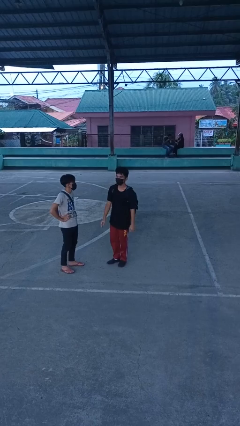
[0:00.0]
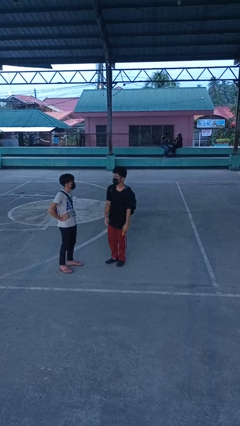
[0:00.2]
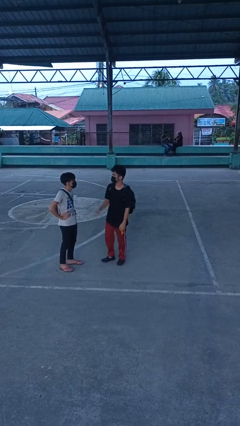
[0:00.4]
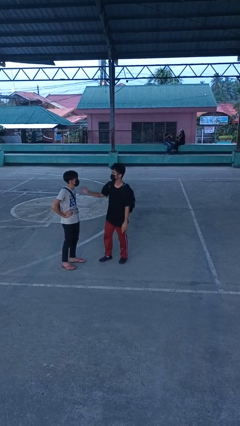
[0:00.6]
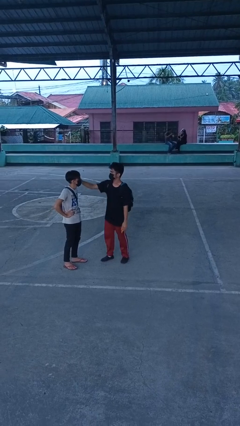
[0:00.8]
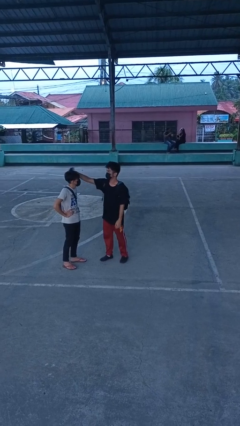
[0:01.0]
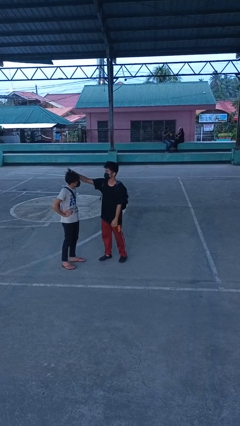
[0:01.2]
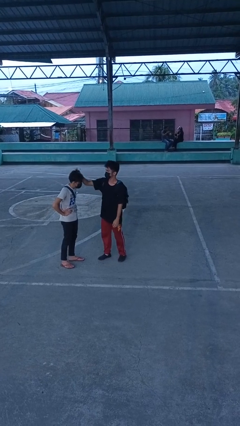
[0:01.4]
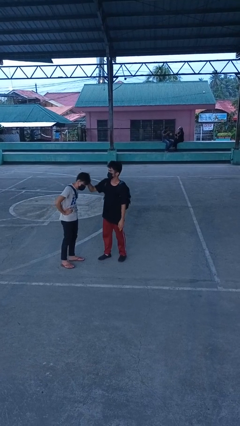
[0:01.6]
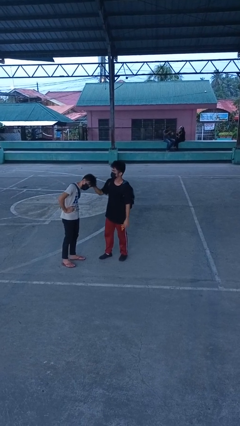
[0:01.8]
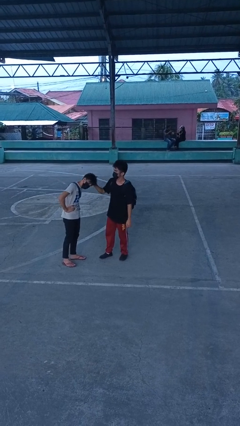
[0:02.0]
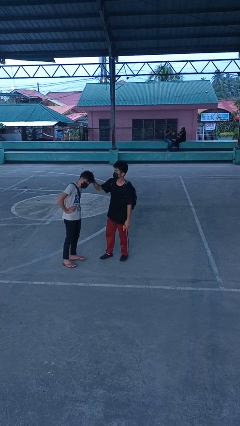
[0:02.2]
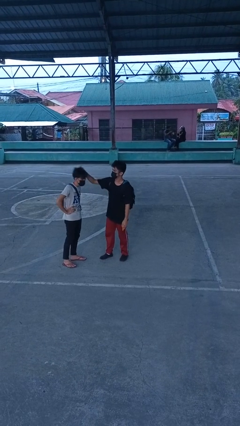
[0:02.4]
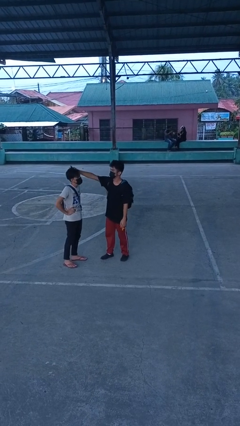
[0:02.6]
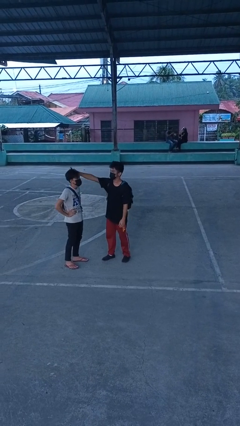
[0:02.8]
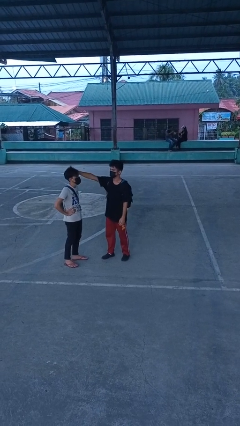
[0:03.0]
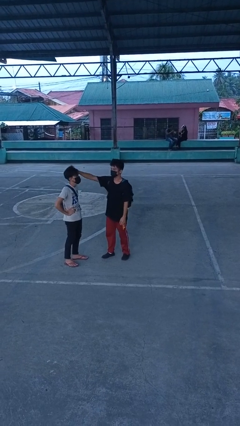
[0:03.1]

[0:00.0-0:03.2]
person grabs person by hair

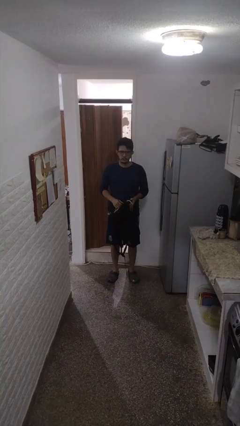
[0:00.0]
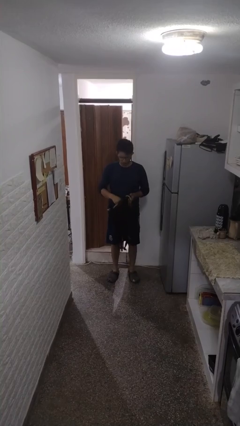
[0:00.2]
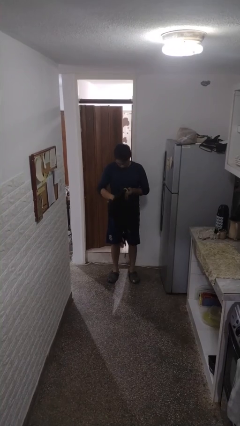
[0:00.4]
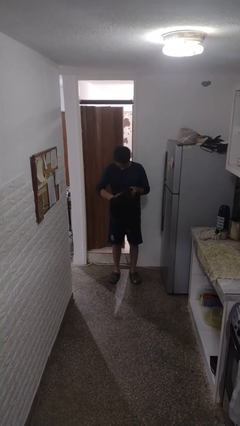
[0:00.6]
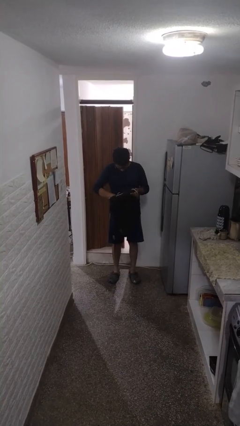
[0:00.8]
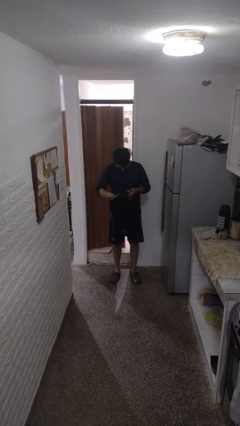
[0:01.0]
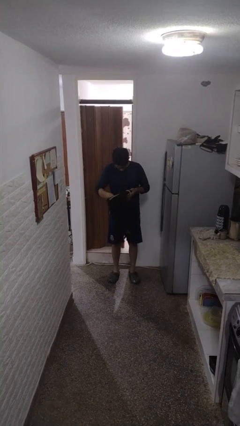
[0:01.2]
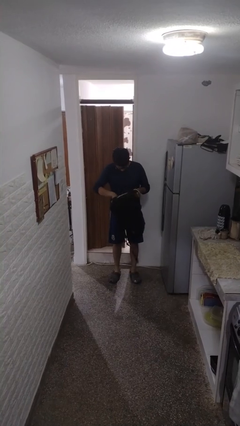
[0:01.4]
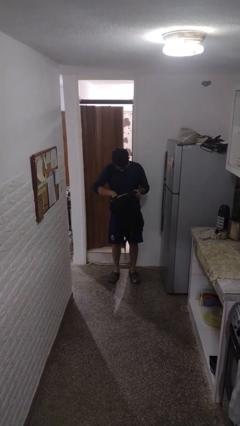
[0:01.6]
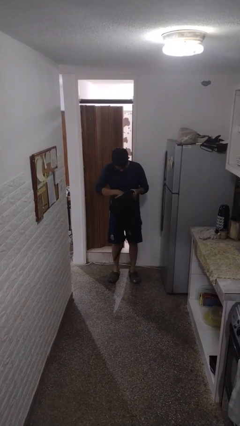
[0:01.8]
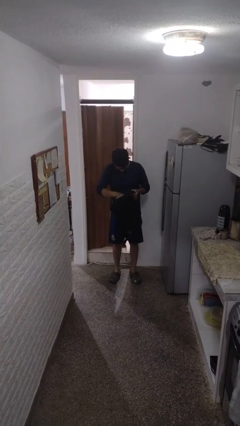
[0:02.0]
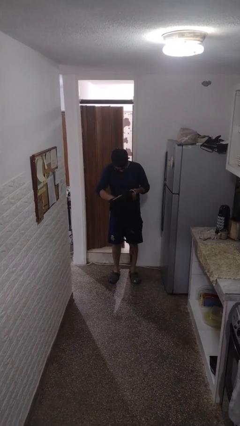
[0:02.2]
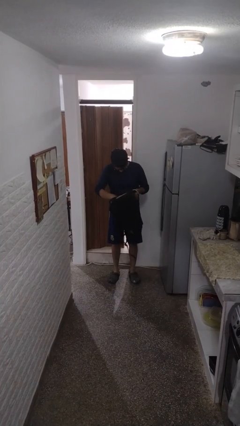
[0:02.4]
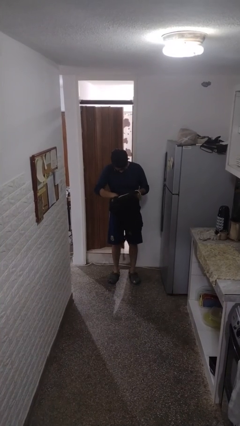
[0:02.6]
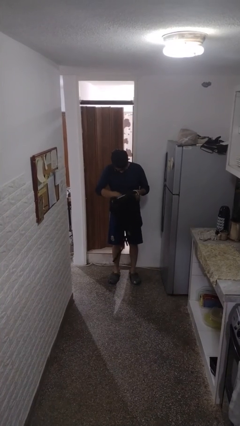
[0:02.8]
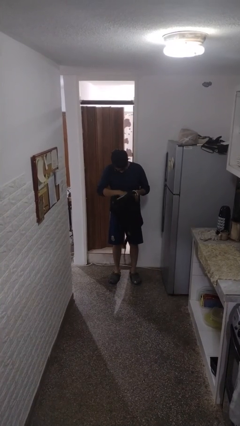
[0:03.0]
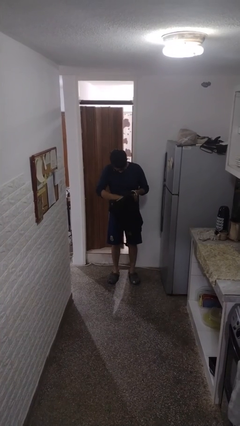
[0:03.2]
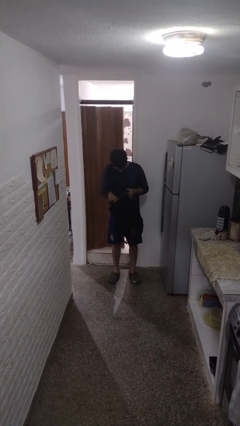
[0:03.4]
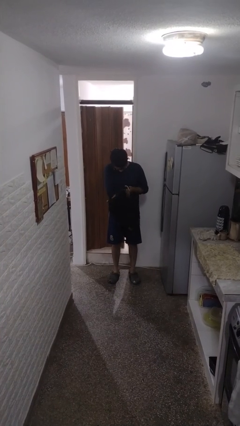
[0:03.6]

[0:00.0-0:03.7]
person searches in backpack

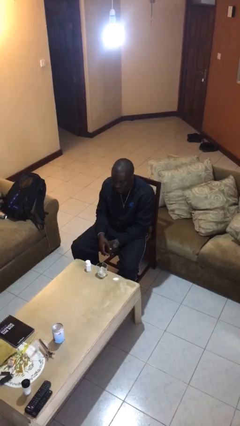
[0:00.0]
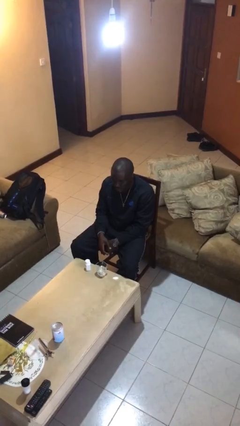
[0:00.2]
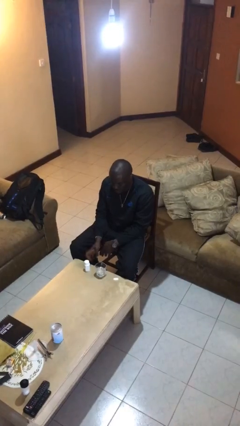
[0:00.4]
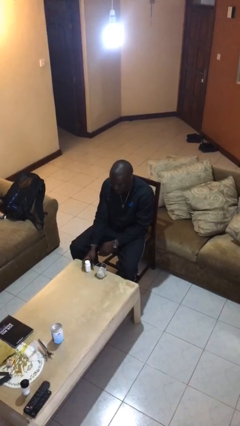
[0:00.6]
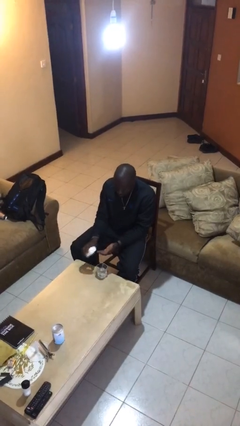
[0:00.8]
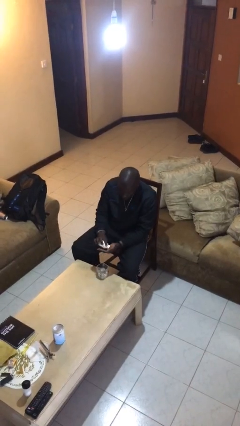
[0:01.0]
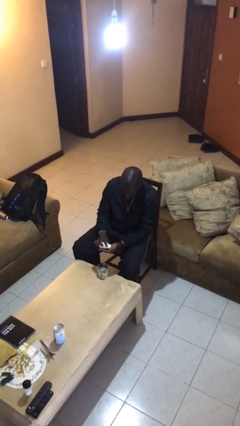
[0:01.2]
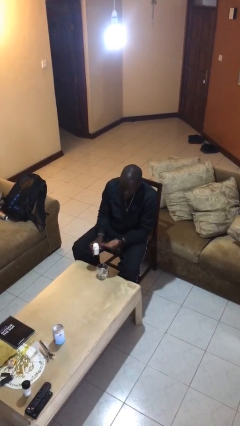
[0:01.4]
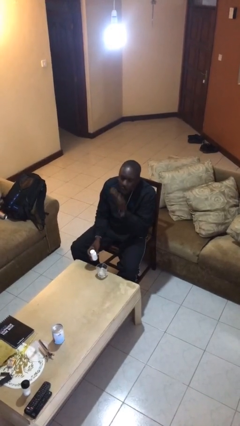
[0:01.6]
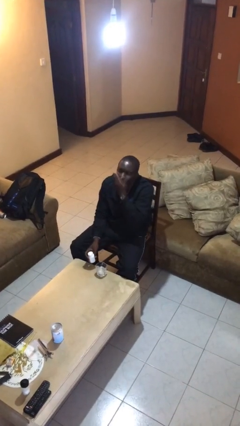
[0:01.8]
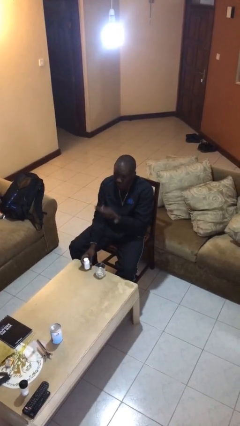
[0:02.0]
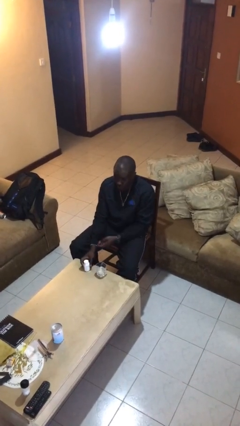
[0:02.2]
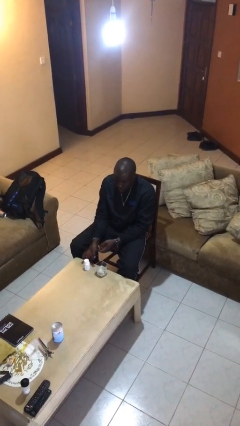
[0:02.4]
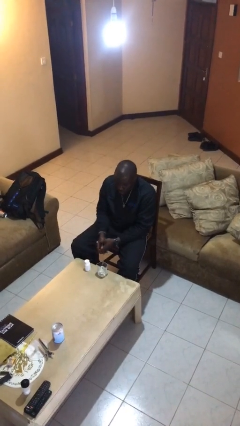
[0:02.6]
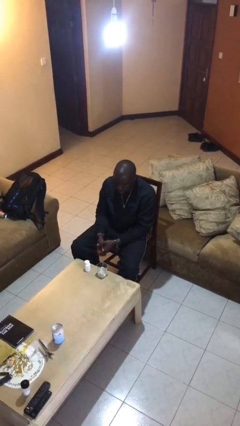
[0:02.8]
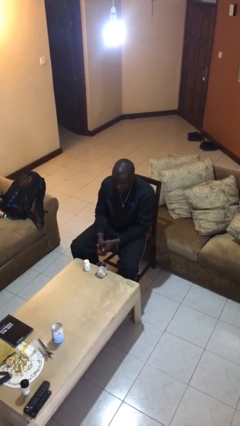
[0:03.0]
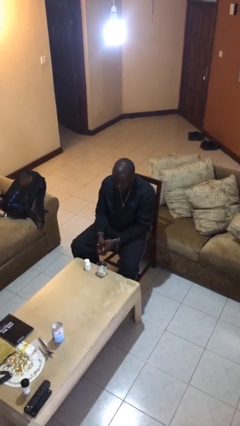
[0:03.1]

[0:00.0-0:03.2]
person takes medicine pills

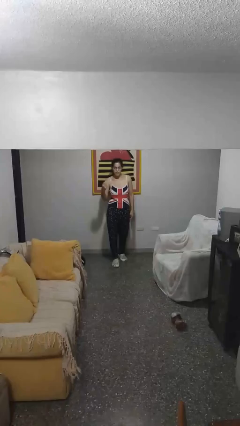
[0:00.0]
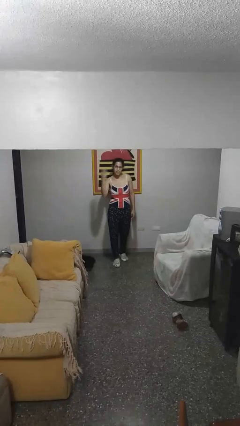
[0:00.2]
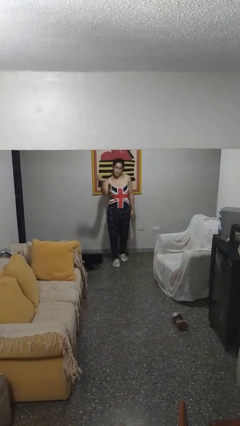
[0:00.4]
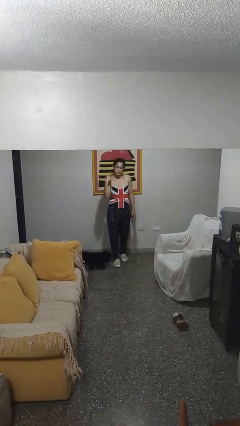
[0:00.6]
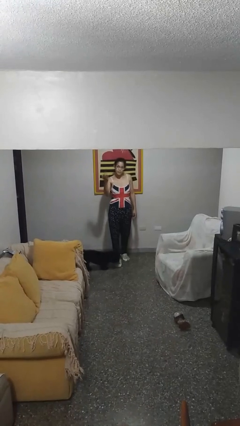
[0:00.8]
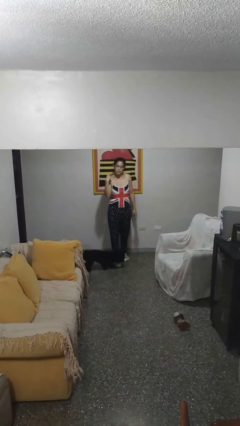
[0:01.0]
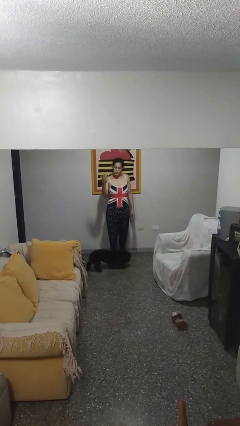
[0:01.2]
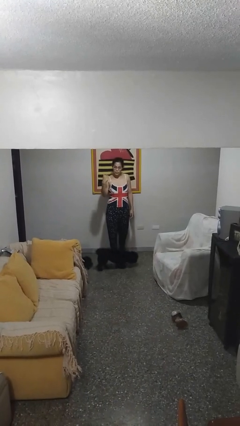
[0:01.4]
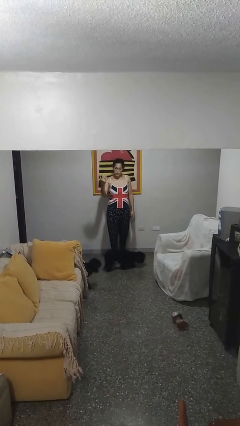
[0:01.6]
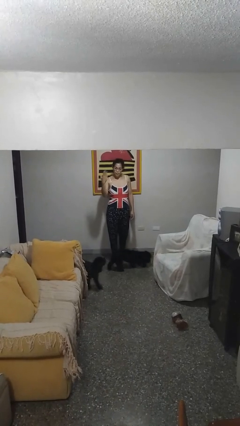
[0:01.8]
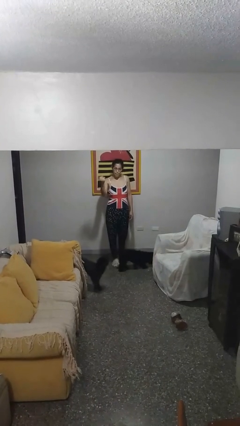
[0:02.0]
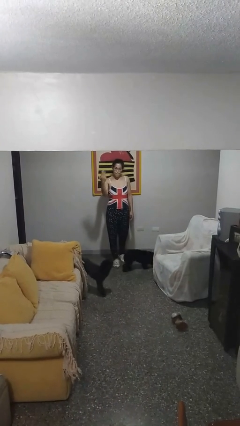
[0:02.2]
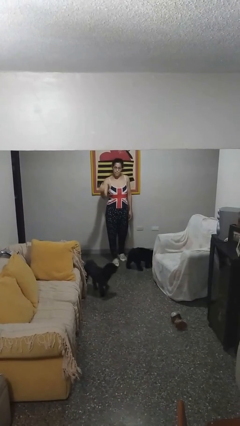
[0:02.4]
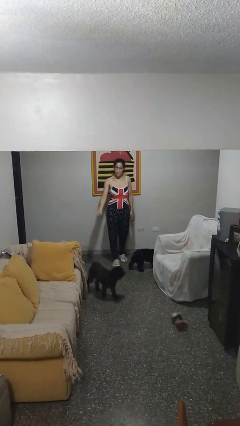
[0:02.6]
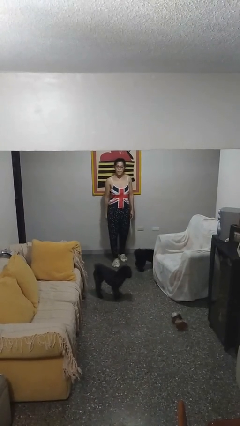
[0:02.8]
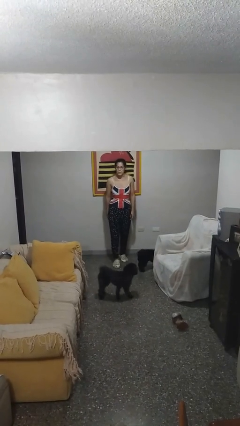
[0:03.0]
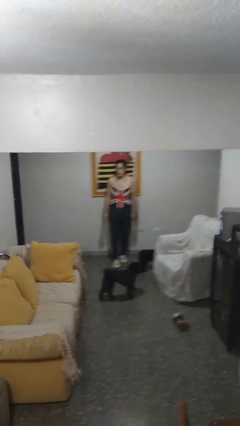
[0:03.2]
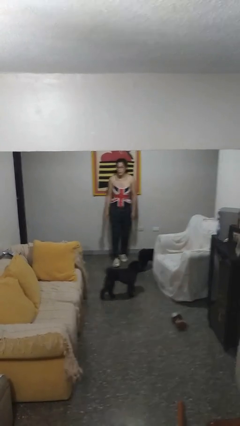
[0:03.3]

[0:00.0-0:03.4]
person gestures come here

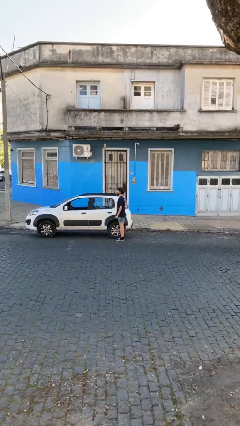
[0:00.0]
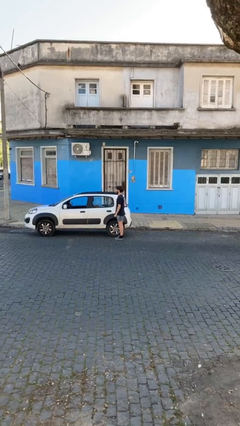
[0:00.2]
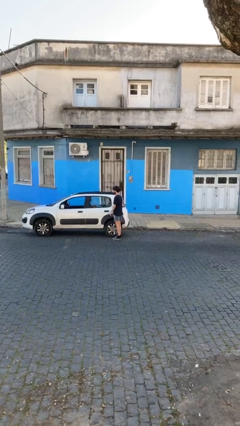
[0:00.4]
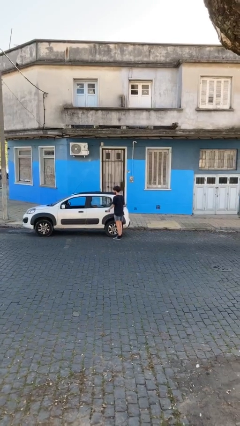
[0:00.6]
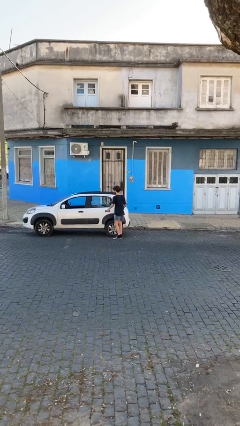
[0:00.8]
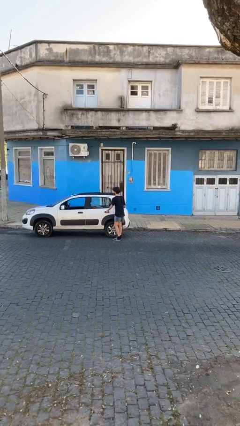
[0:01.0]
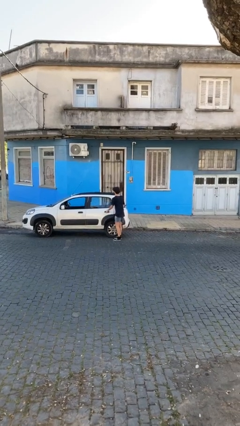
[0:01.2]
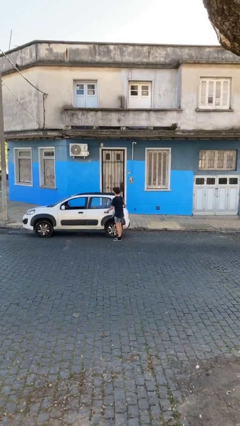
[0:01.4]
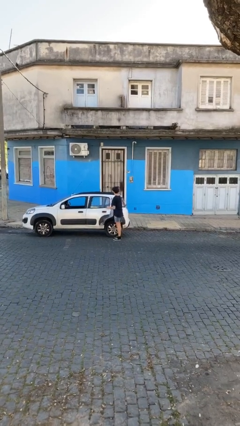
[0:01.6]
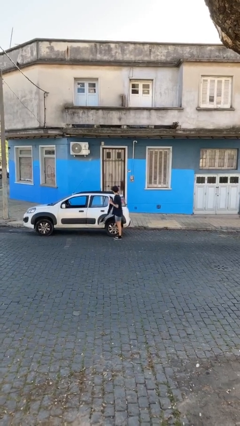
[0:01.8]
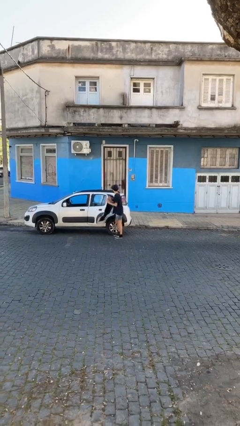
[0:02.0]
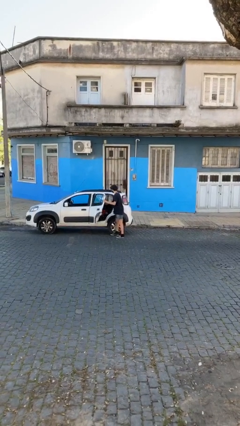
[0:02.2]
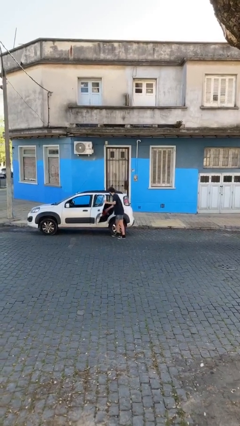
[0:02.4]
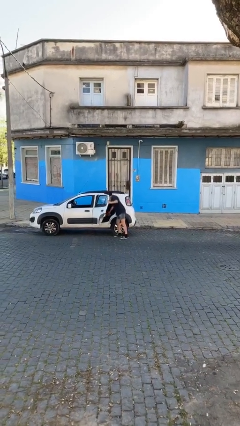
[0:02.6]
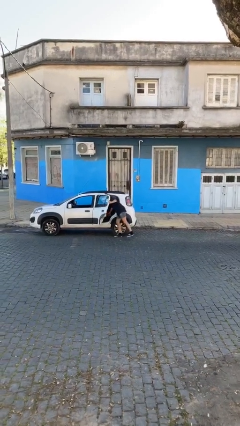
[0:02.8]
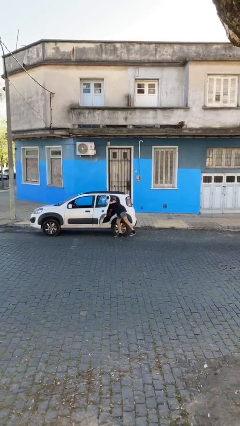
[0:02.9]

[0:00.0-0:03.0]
person opens car door

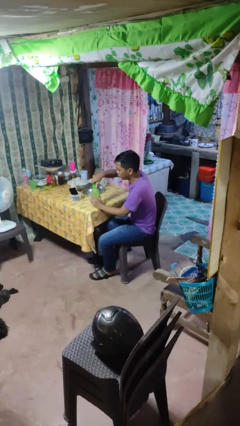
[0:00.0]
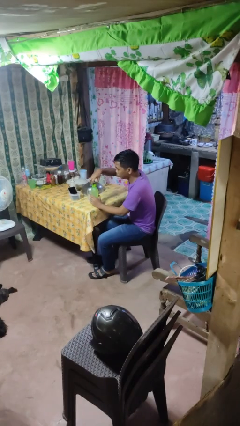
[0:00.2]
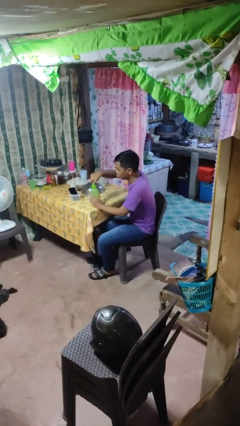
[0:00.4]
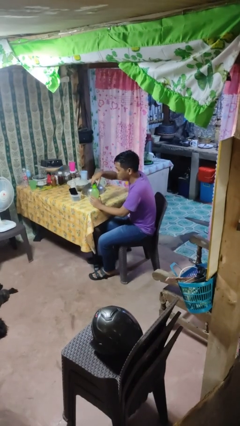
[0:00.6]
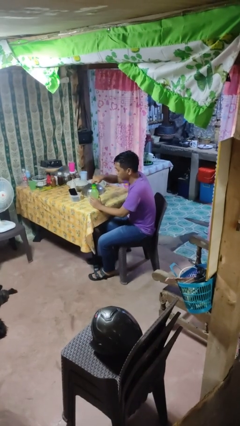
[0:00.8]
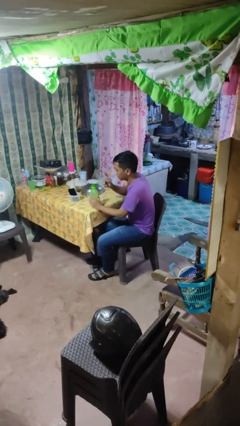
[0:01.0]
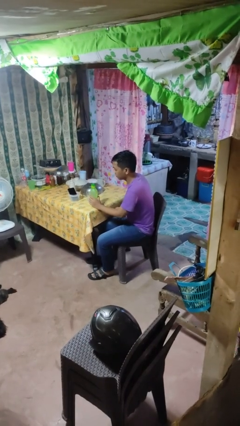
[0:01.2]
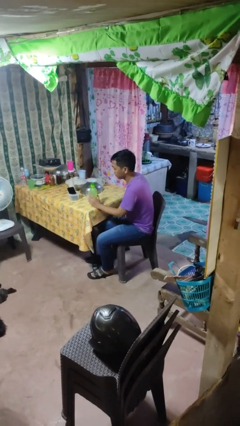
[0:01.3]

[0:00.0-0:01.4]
person screws lid to bottle
